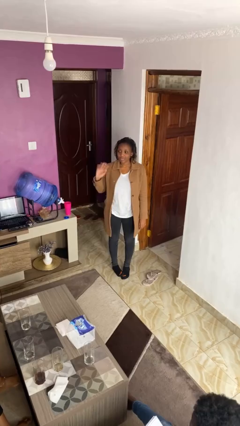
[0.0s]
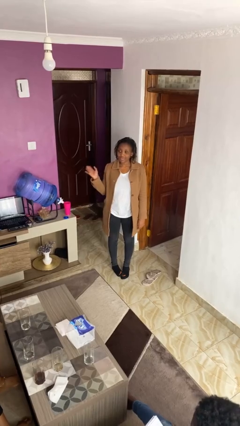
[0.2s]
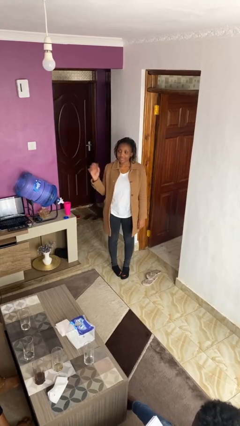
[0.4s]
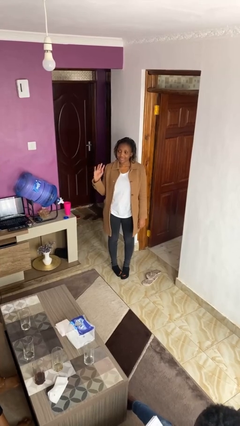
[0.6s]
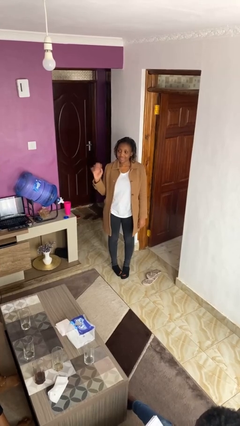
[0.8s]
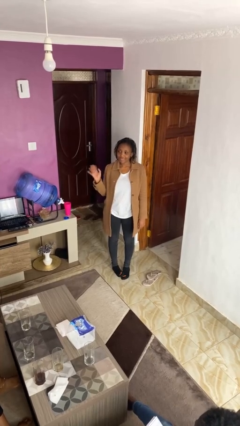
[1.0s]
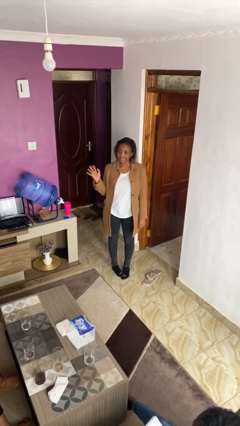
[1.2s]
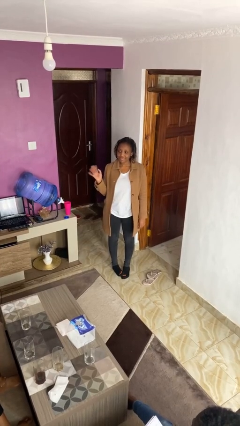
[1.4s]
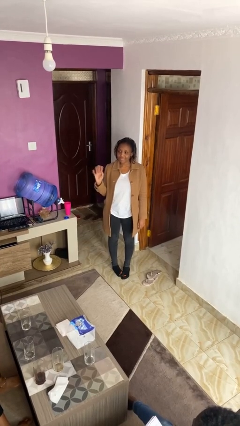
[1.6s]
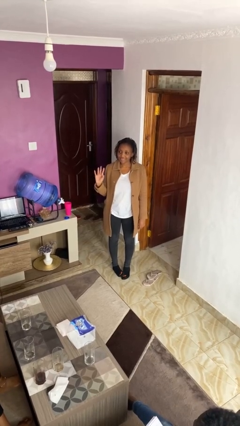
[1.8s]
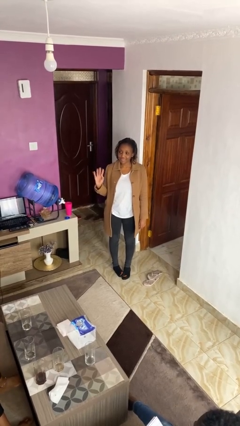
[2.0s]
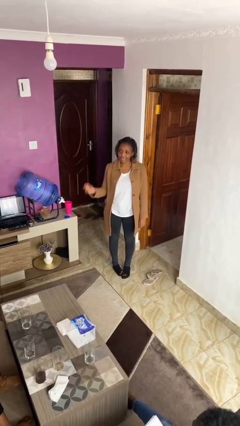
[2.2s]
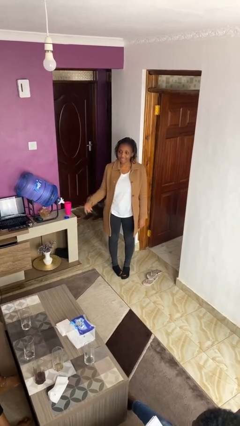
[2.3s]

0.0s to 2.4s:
person waves at person

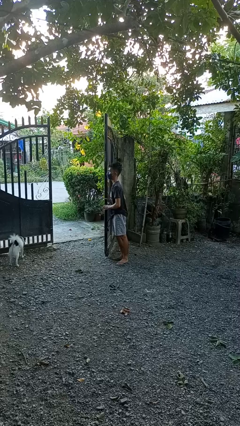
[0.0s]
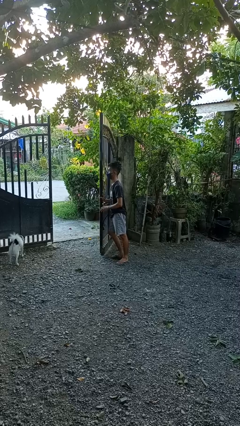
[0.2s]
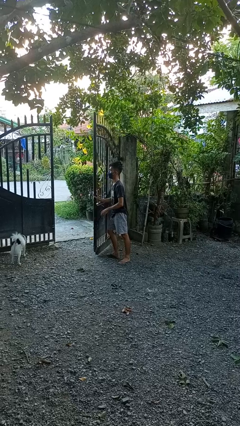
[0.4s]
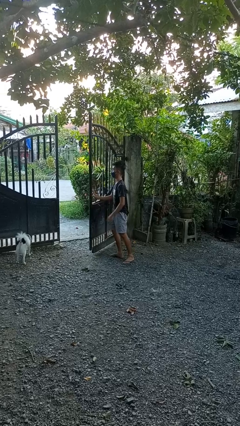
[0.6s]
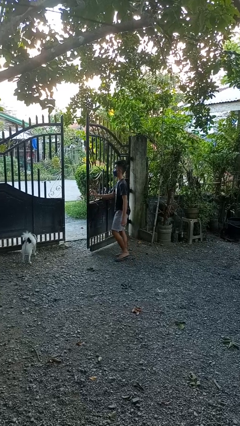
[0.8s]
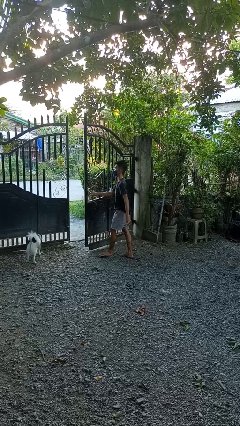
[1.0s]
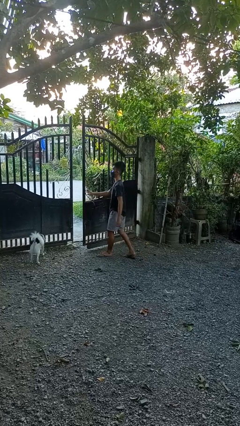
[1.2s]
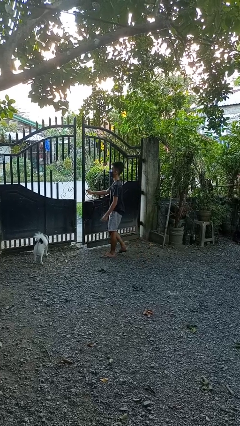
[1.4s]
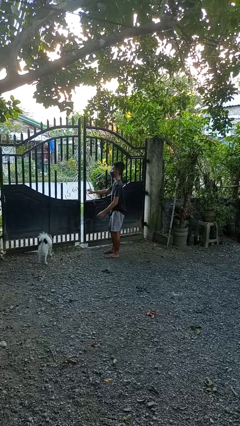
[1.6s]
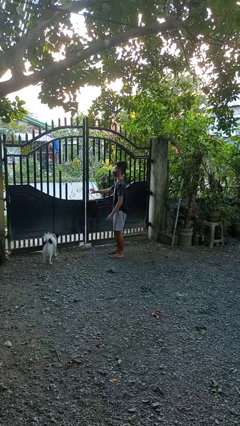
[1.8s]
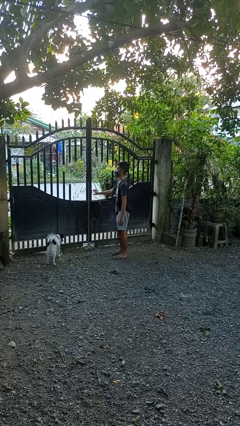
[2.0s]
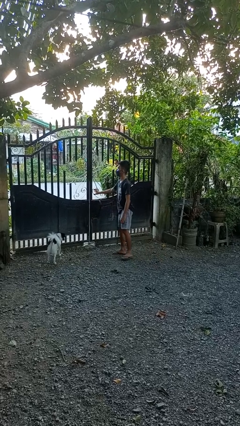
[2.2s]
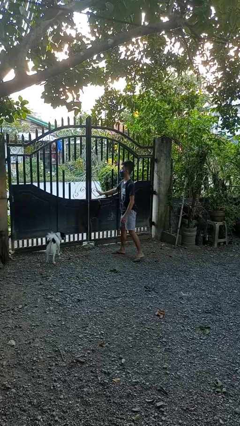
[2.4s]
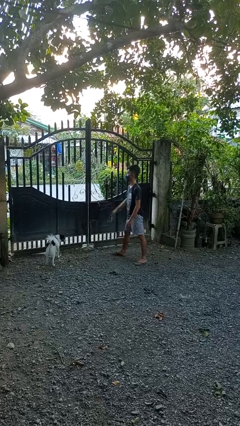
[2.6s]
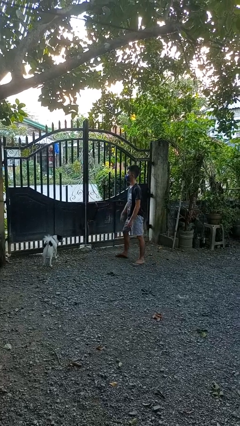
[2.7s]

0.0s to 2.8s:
person closes gate

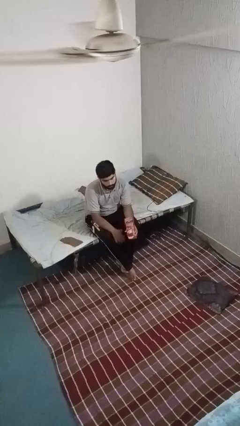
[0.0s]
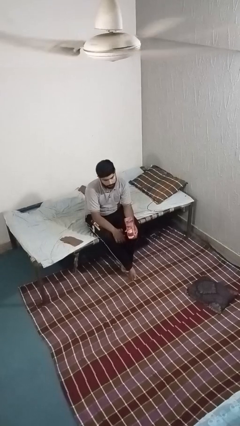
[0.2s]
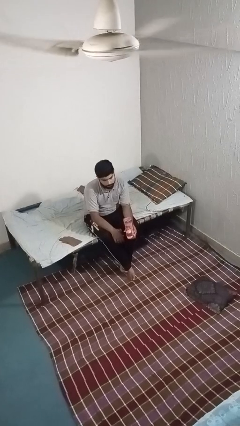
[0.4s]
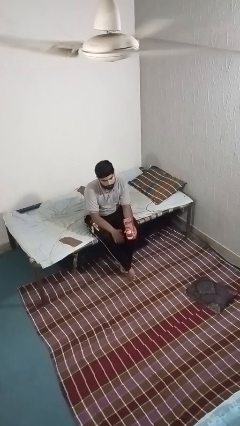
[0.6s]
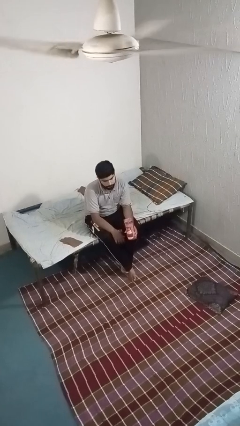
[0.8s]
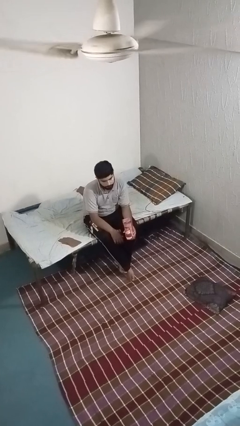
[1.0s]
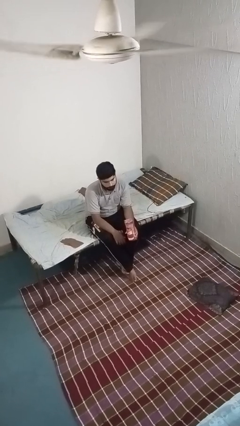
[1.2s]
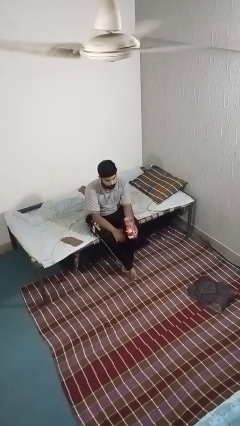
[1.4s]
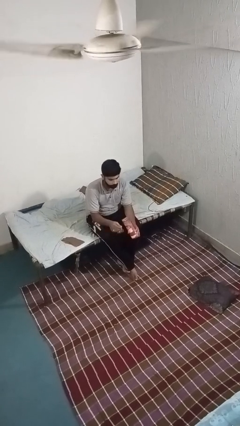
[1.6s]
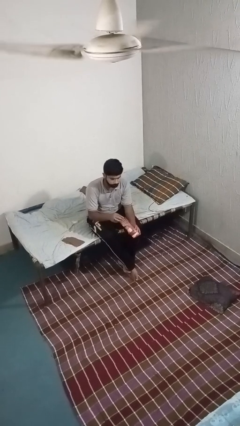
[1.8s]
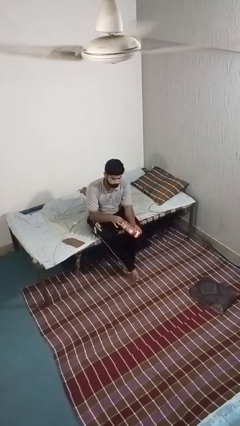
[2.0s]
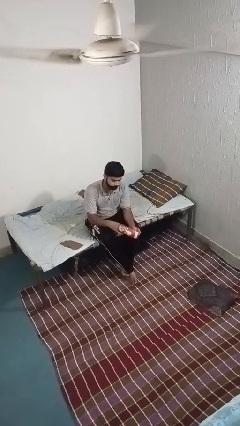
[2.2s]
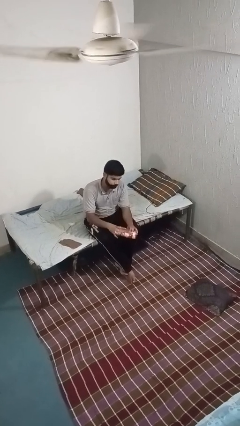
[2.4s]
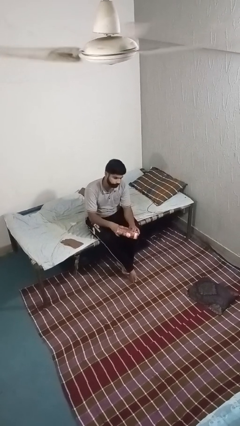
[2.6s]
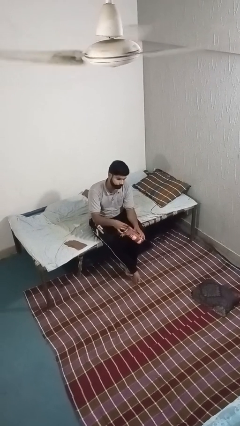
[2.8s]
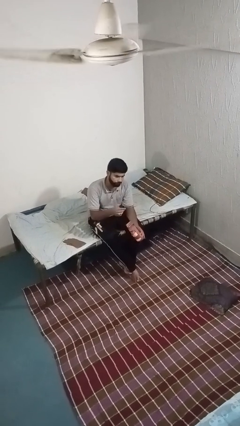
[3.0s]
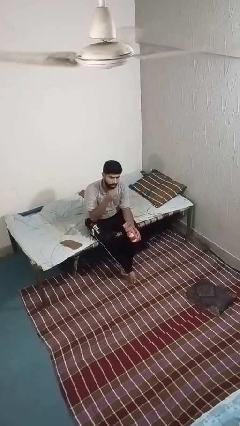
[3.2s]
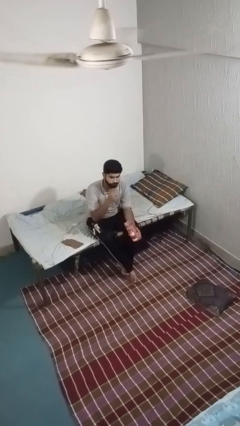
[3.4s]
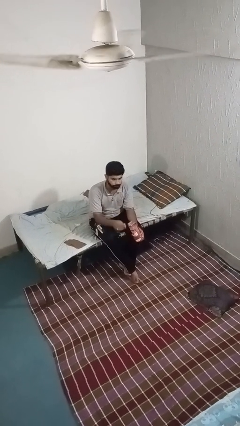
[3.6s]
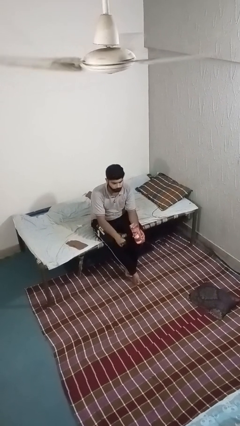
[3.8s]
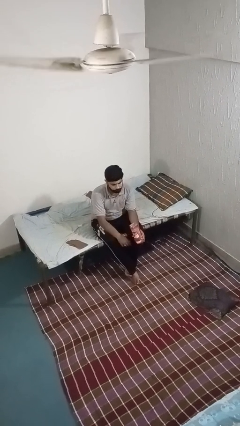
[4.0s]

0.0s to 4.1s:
person eats snack from bag

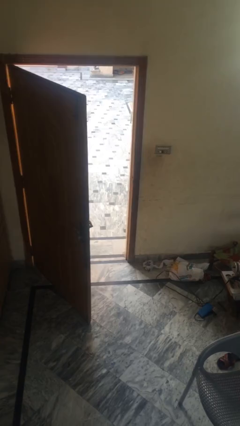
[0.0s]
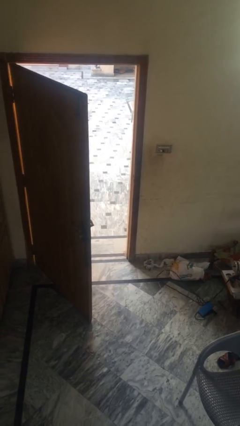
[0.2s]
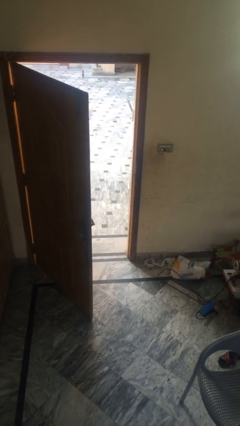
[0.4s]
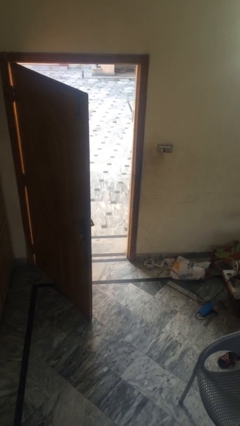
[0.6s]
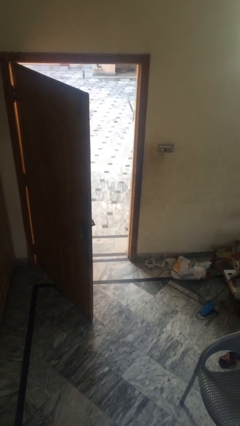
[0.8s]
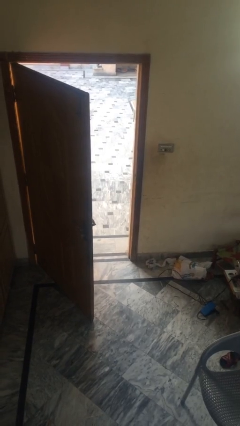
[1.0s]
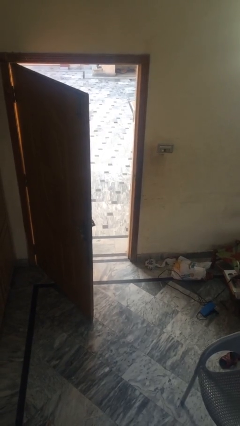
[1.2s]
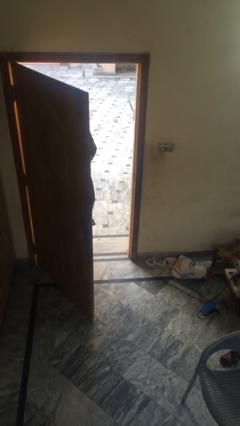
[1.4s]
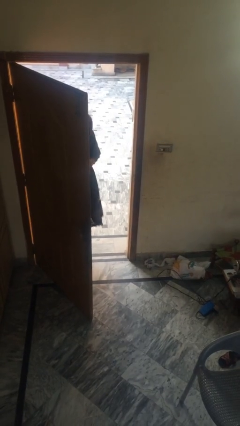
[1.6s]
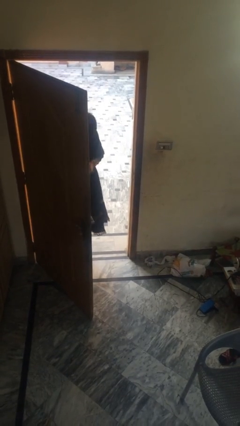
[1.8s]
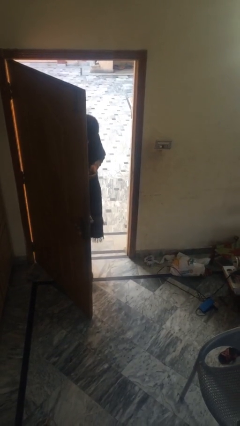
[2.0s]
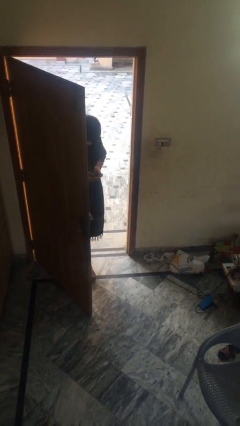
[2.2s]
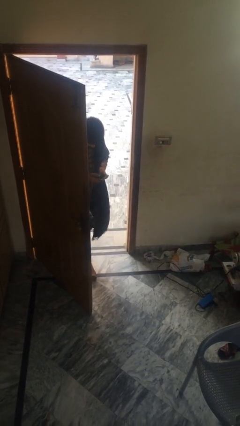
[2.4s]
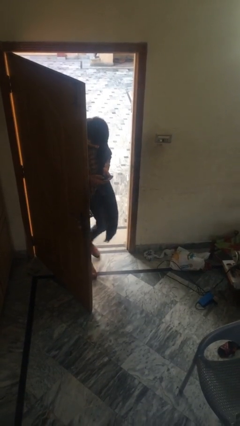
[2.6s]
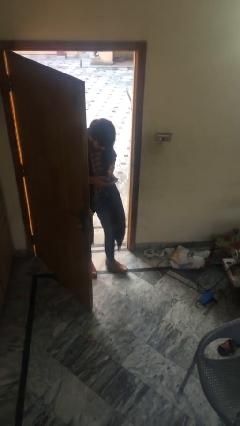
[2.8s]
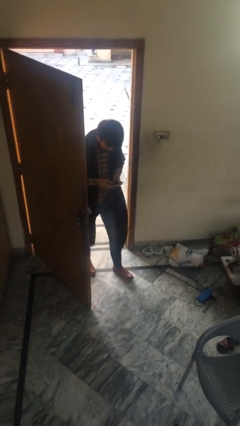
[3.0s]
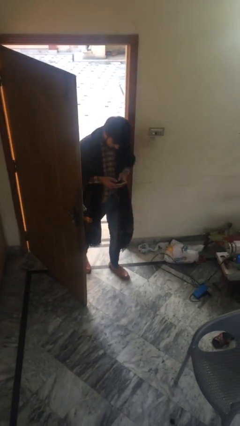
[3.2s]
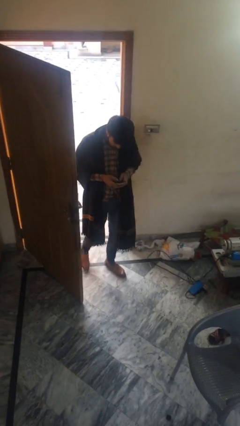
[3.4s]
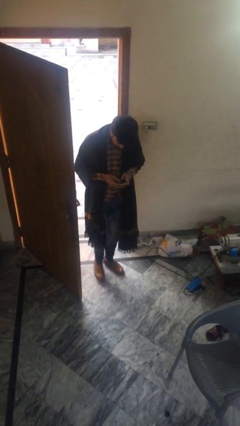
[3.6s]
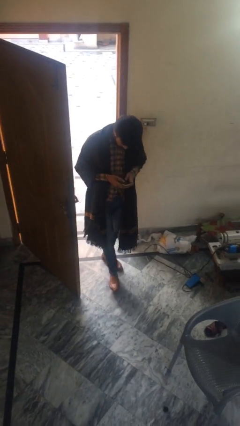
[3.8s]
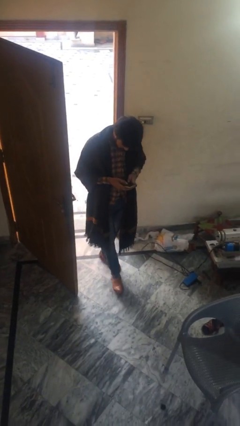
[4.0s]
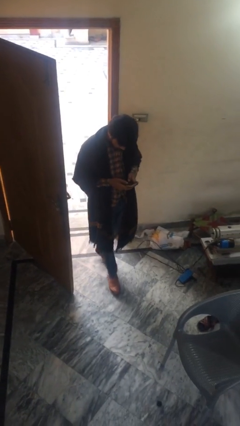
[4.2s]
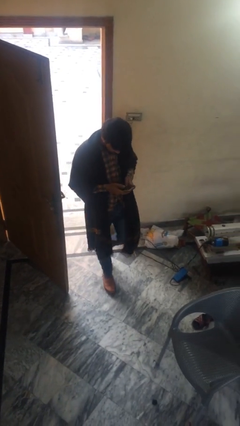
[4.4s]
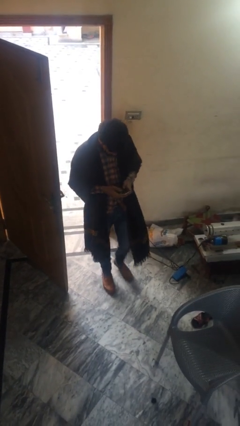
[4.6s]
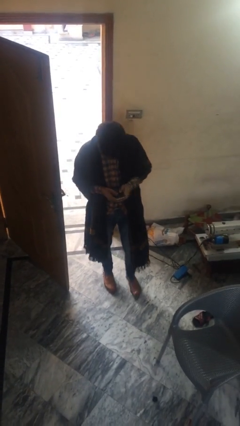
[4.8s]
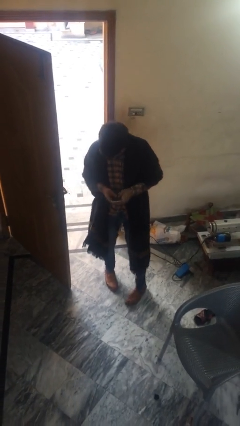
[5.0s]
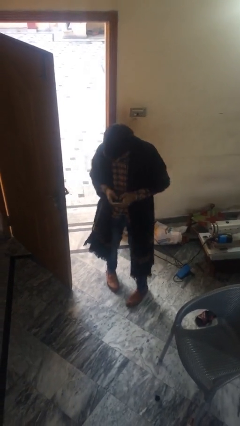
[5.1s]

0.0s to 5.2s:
person enters scene through structure

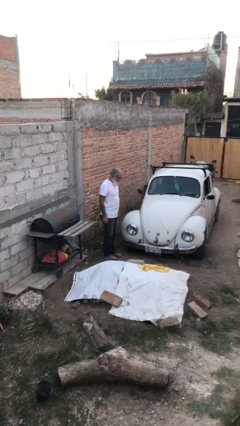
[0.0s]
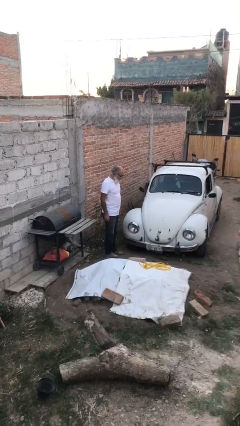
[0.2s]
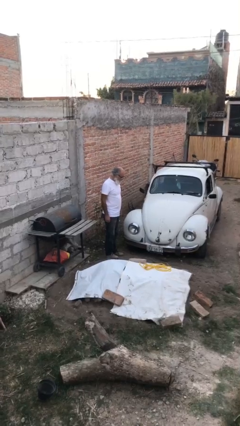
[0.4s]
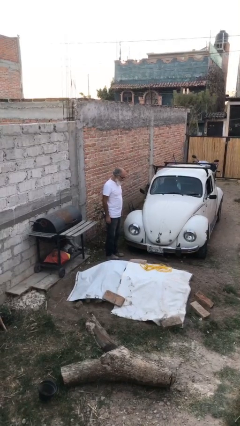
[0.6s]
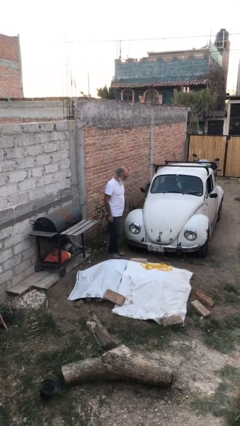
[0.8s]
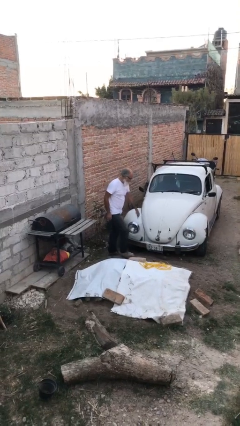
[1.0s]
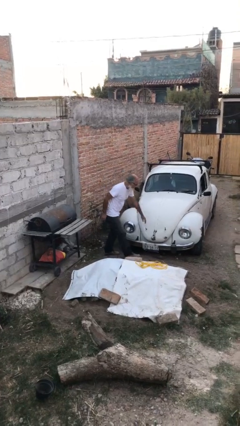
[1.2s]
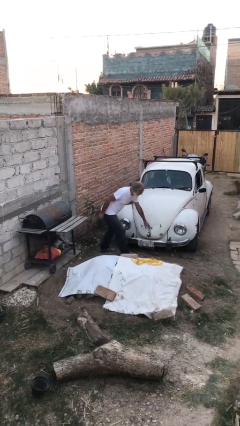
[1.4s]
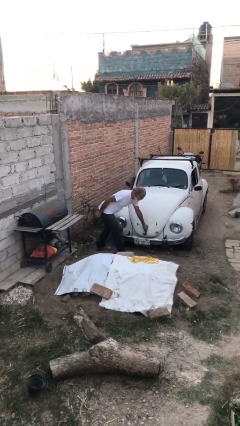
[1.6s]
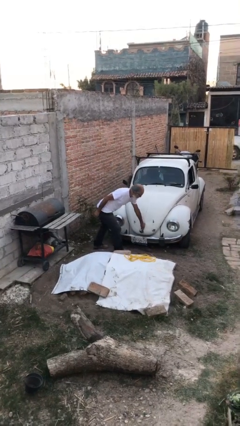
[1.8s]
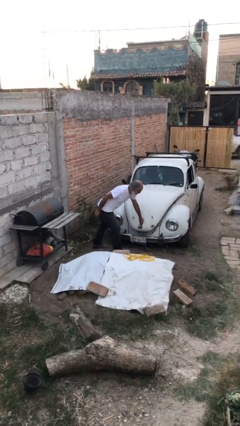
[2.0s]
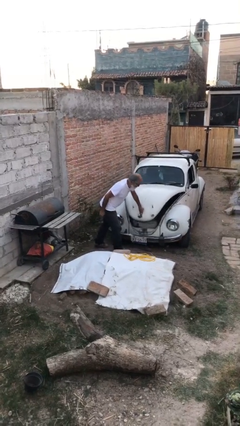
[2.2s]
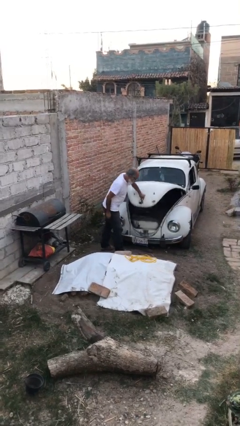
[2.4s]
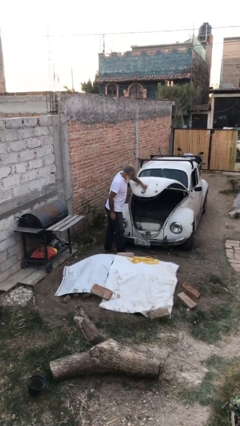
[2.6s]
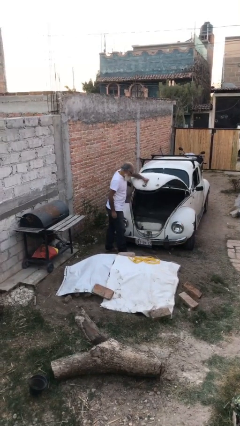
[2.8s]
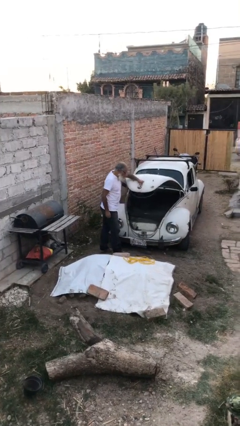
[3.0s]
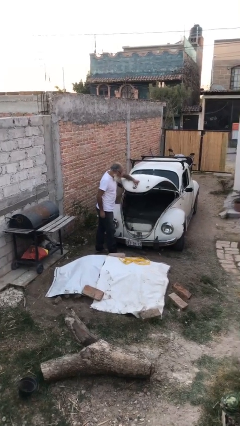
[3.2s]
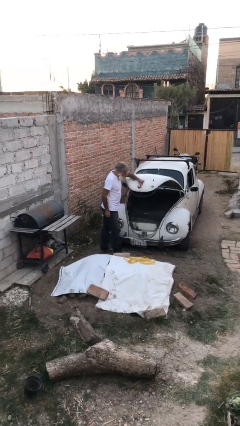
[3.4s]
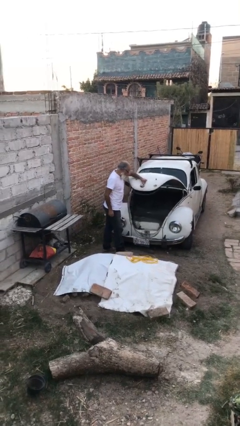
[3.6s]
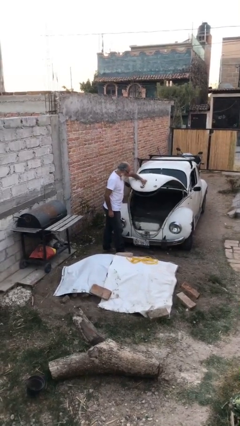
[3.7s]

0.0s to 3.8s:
person opens car trunk
